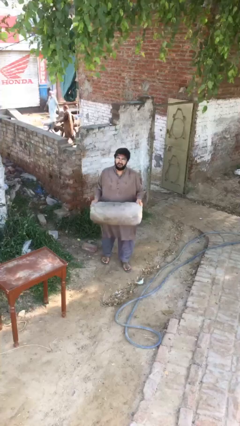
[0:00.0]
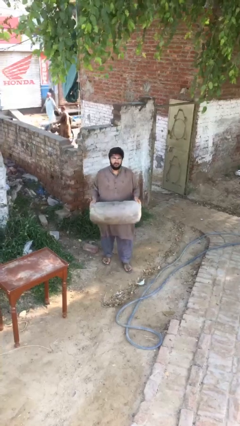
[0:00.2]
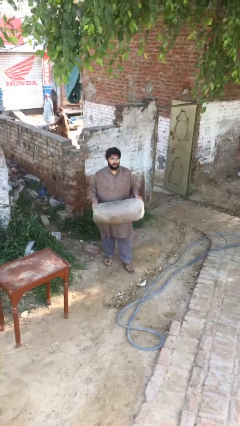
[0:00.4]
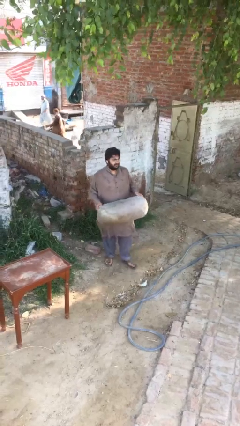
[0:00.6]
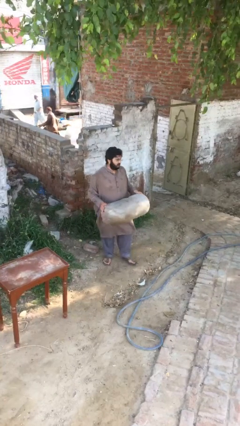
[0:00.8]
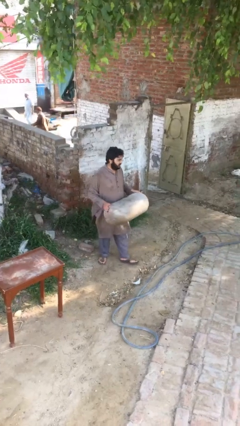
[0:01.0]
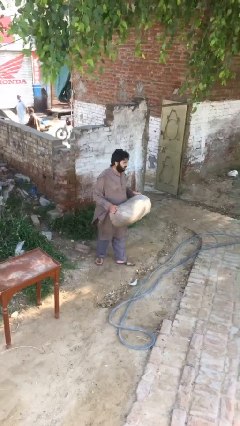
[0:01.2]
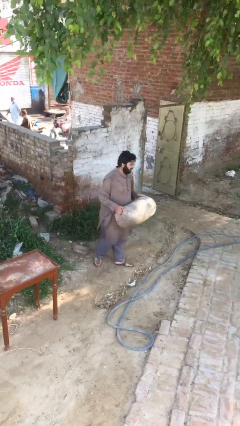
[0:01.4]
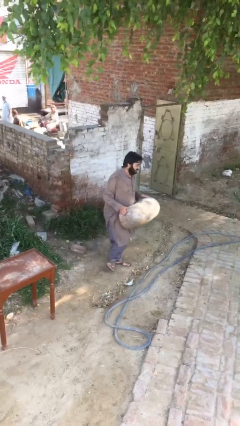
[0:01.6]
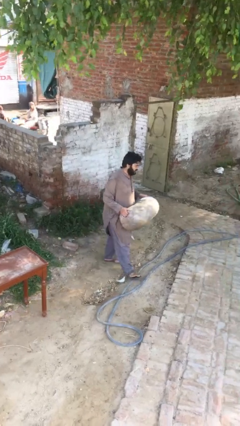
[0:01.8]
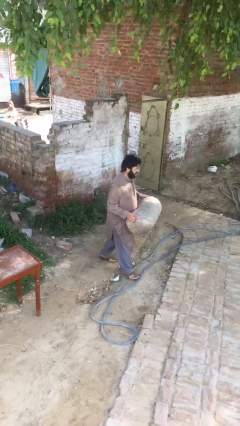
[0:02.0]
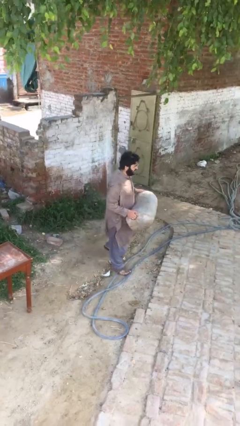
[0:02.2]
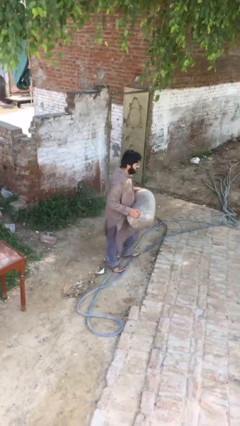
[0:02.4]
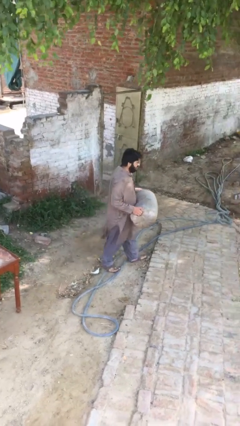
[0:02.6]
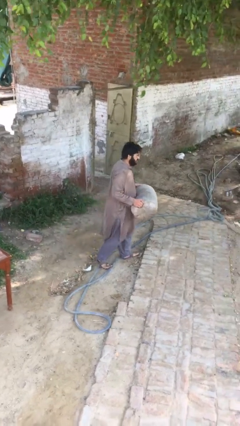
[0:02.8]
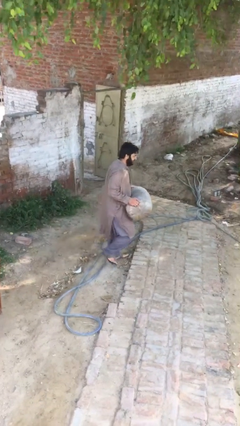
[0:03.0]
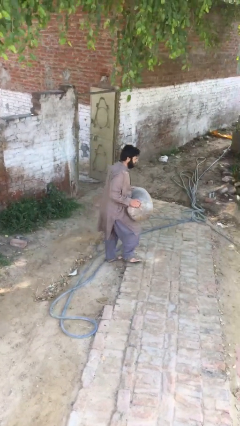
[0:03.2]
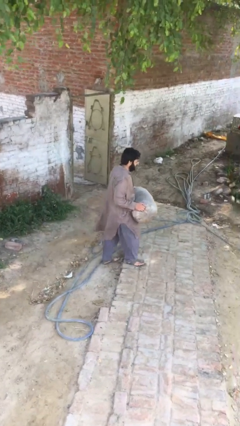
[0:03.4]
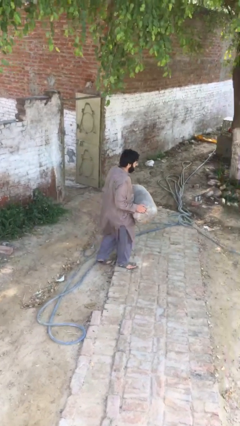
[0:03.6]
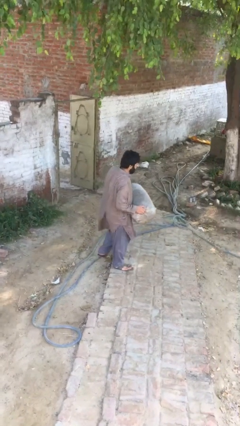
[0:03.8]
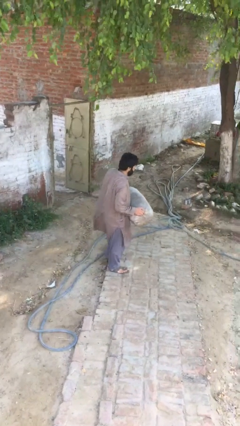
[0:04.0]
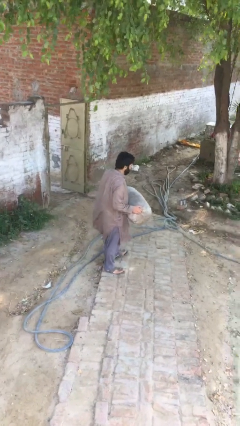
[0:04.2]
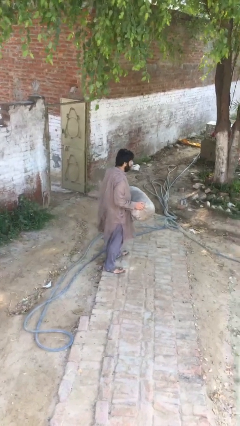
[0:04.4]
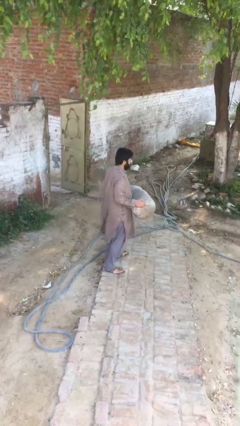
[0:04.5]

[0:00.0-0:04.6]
person carries heavy object

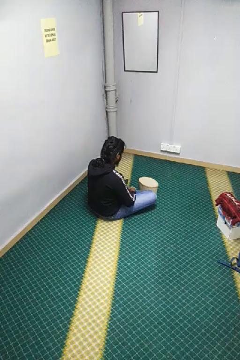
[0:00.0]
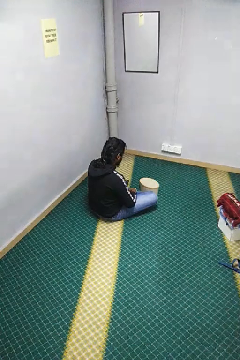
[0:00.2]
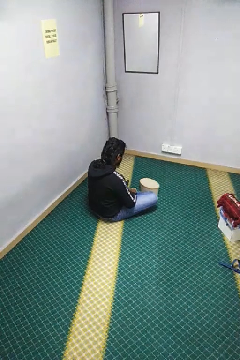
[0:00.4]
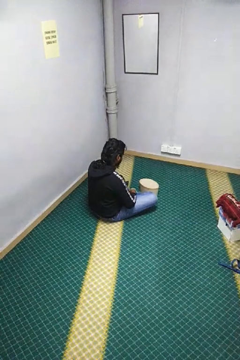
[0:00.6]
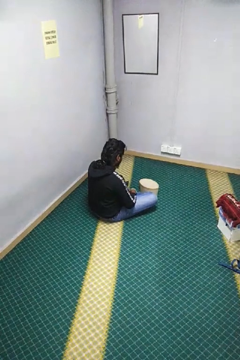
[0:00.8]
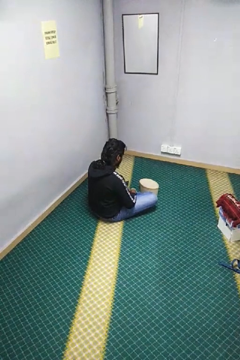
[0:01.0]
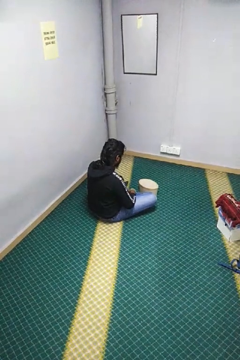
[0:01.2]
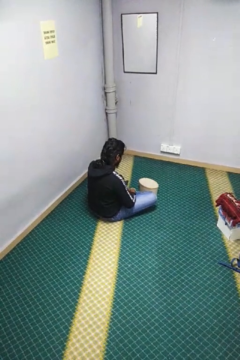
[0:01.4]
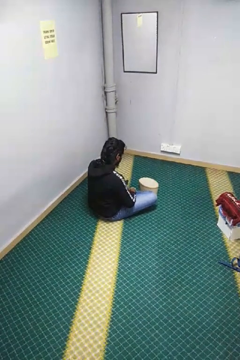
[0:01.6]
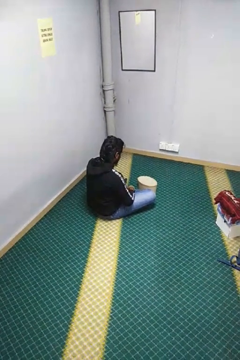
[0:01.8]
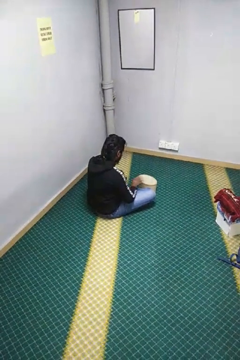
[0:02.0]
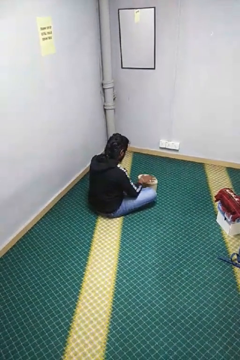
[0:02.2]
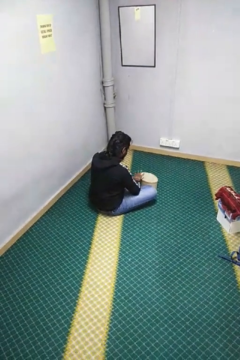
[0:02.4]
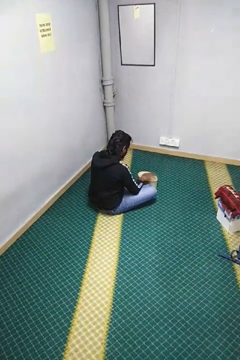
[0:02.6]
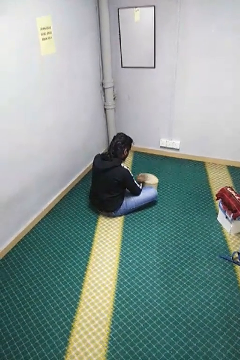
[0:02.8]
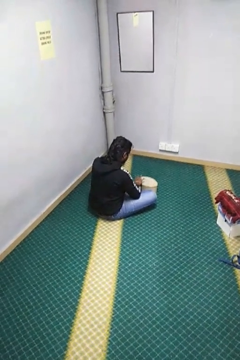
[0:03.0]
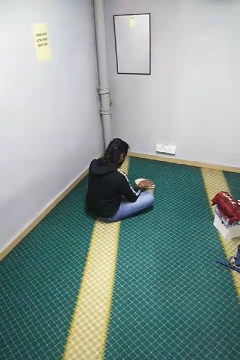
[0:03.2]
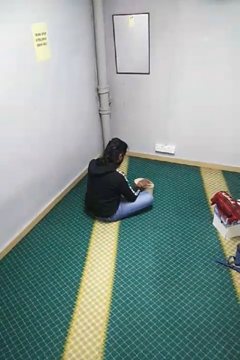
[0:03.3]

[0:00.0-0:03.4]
person waves hand over object

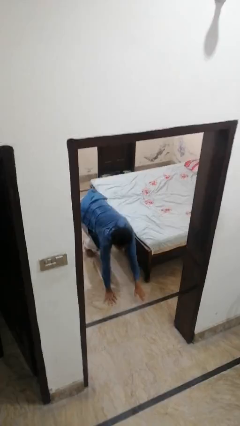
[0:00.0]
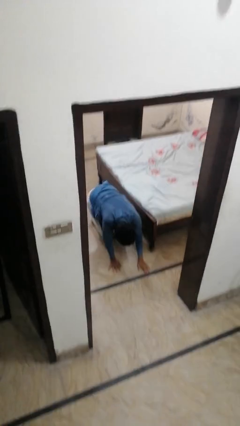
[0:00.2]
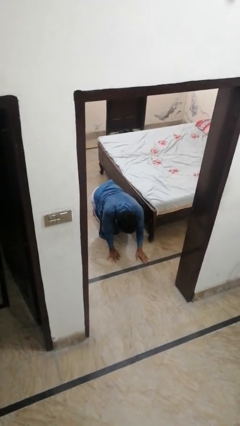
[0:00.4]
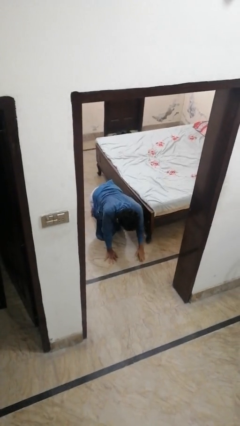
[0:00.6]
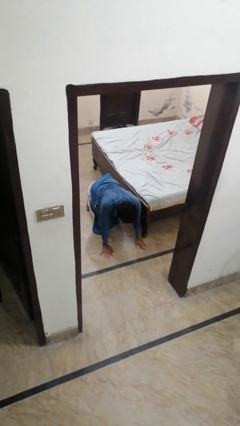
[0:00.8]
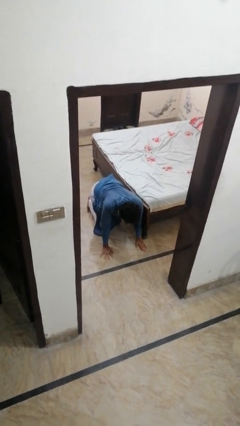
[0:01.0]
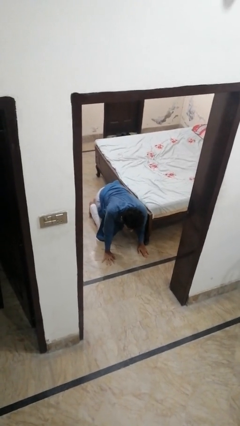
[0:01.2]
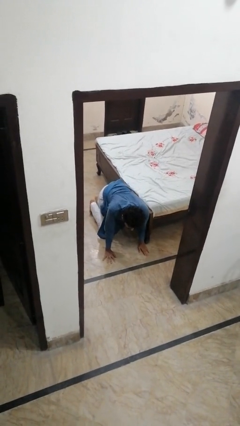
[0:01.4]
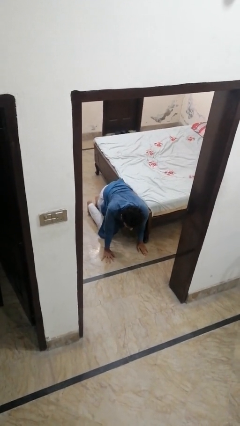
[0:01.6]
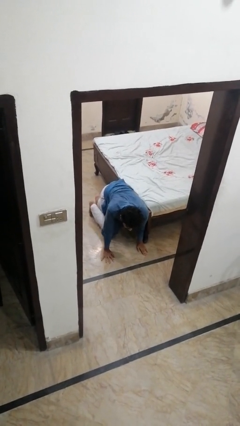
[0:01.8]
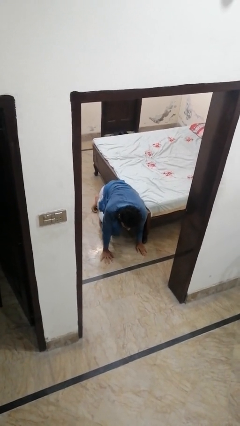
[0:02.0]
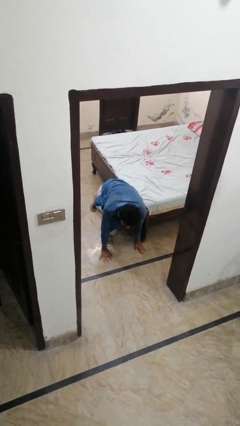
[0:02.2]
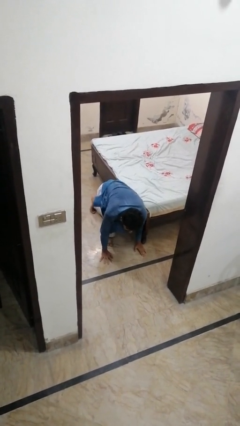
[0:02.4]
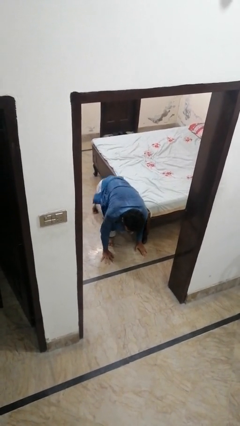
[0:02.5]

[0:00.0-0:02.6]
person falls from bed

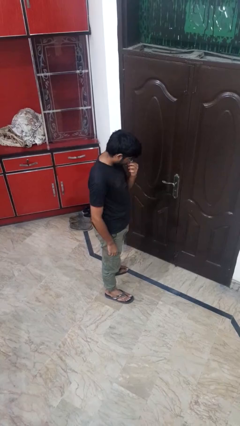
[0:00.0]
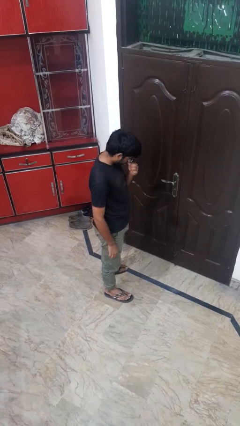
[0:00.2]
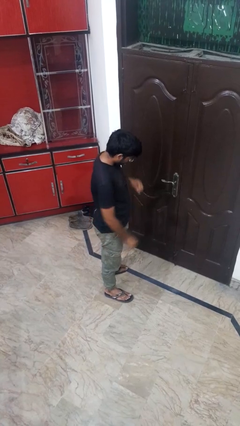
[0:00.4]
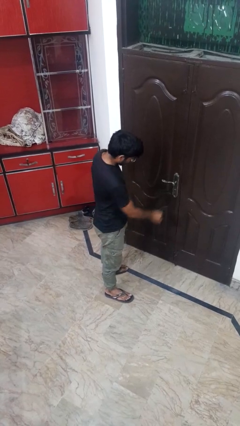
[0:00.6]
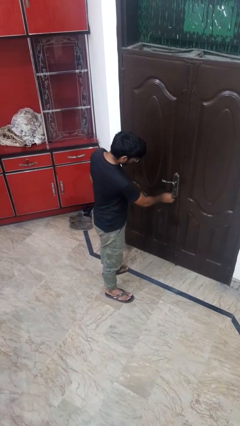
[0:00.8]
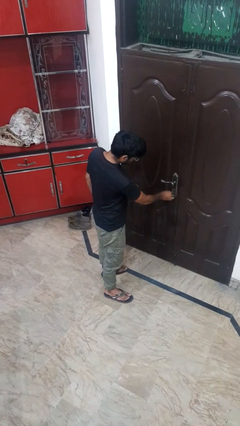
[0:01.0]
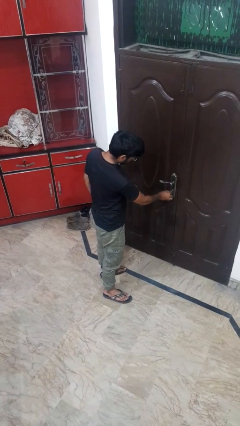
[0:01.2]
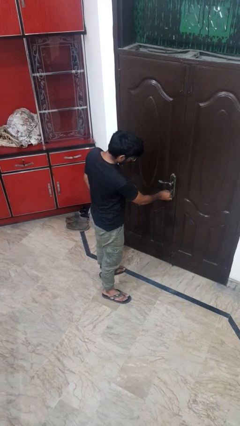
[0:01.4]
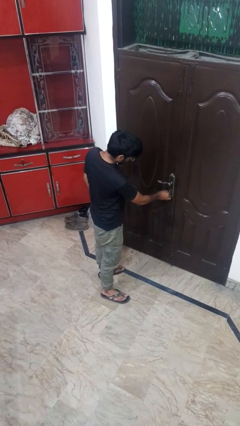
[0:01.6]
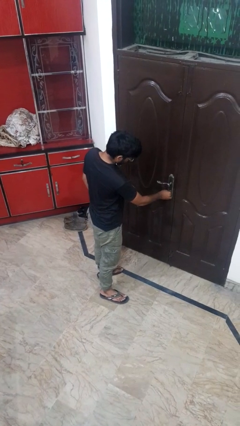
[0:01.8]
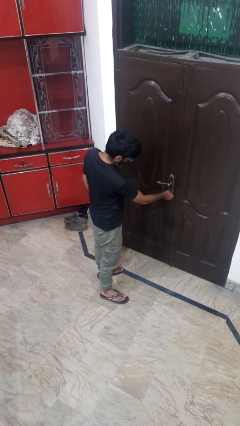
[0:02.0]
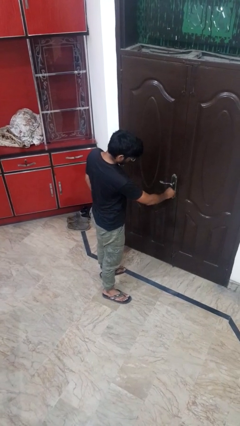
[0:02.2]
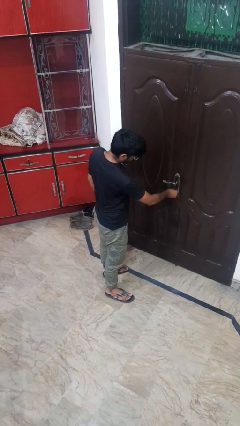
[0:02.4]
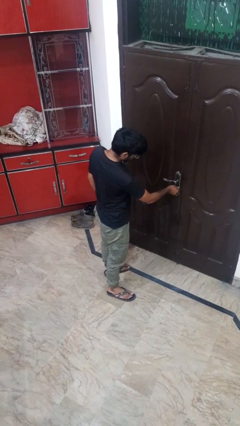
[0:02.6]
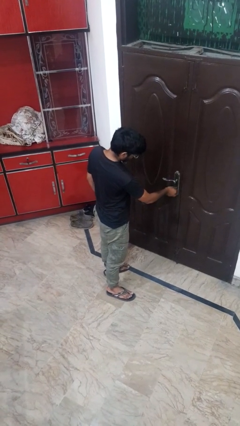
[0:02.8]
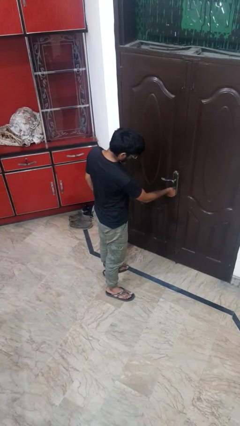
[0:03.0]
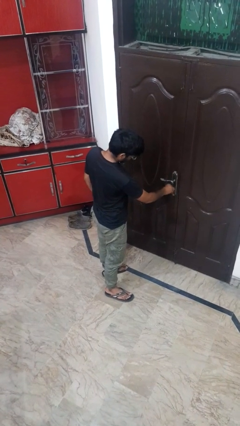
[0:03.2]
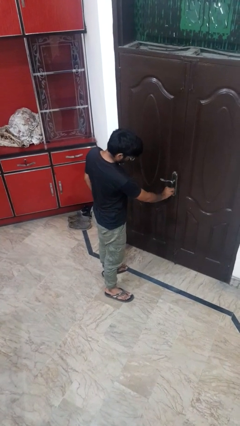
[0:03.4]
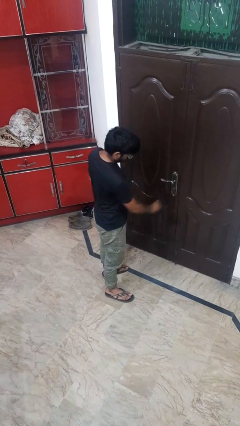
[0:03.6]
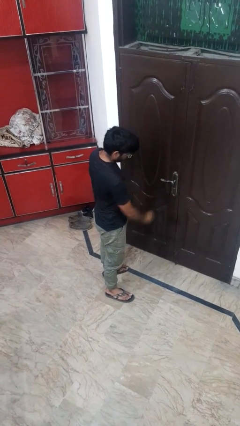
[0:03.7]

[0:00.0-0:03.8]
person unlocks door with keys

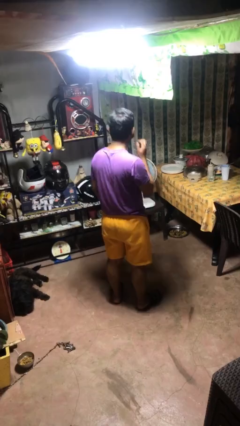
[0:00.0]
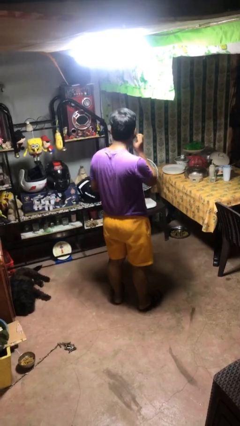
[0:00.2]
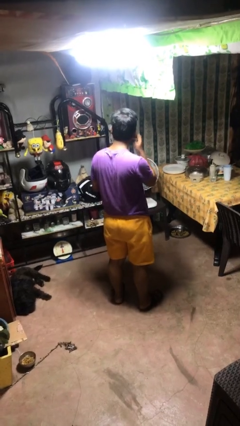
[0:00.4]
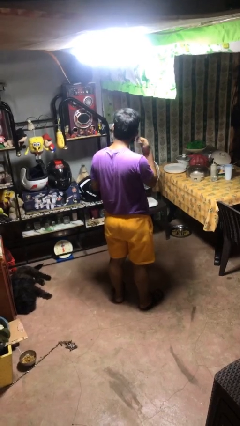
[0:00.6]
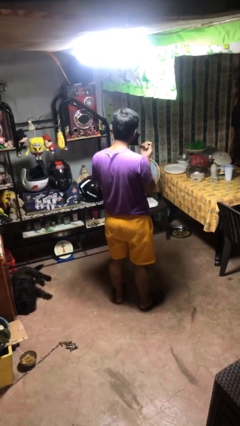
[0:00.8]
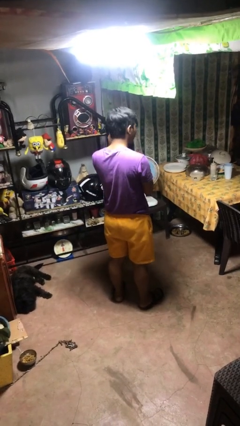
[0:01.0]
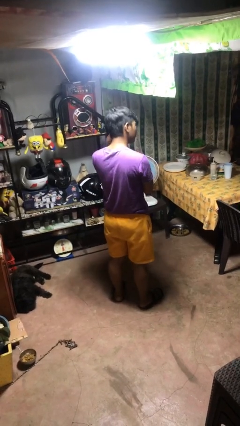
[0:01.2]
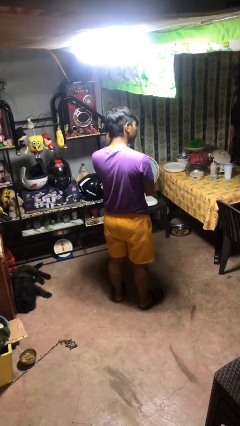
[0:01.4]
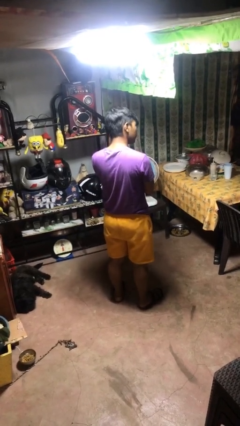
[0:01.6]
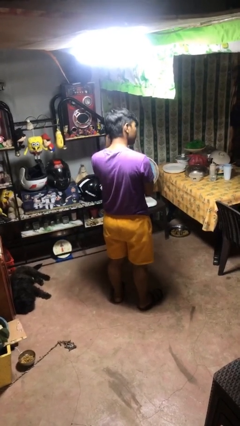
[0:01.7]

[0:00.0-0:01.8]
person takes off facemask

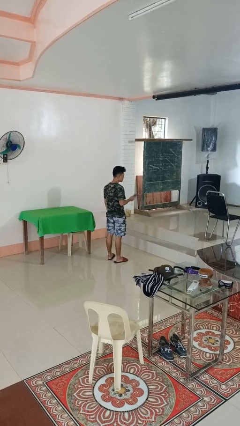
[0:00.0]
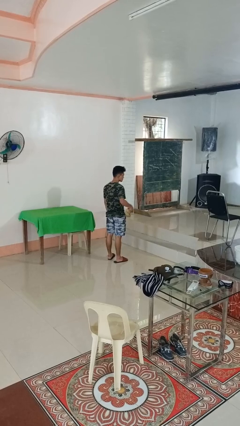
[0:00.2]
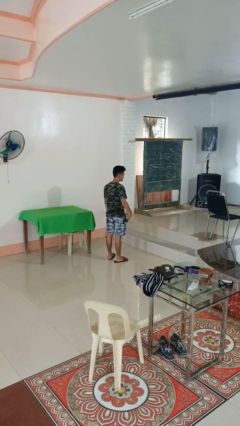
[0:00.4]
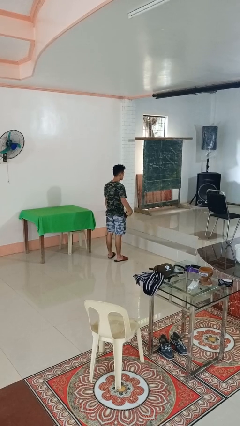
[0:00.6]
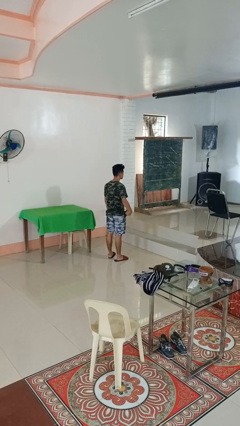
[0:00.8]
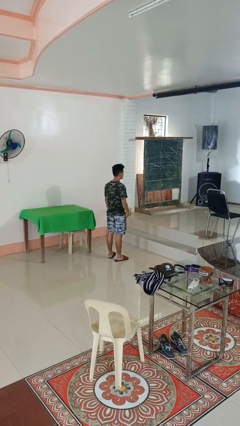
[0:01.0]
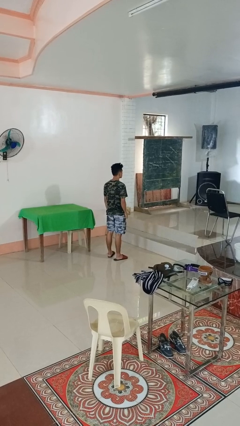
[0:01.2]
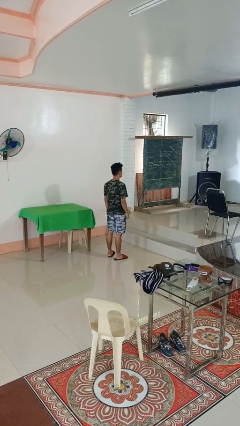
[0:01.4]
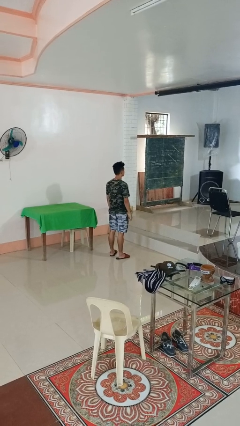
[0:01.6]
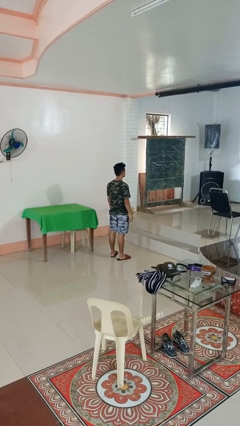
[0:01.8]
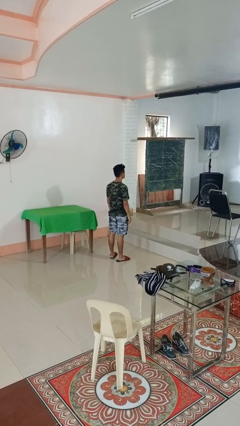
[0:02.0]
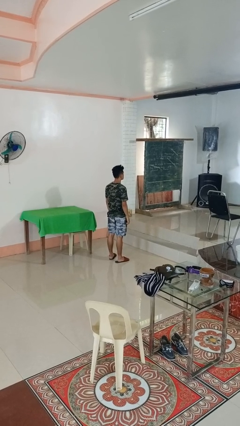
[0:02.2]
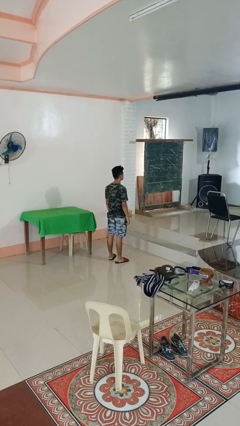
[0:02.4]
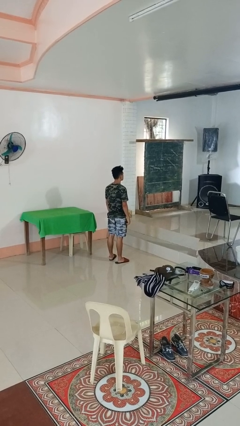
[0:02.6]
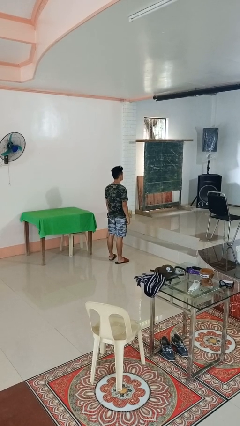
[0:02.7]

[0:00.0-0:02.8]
person puts phone into pocket
